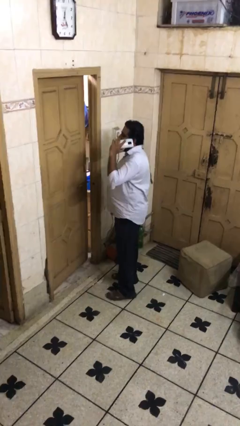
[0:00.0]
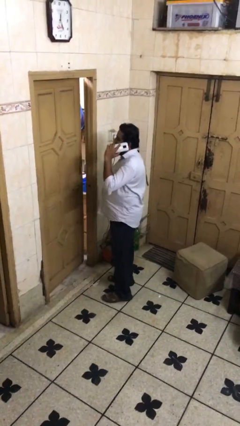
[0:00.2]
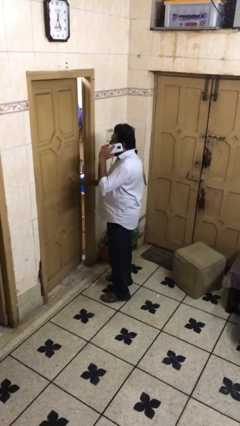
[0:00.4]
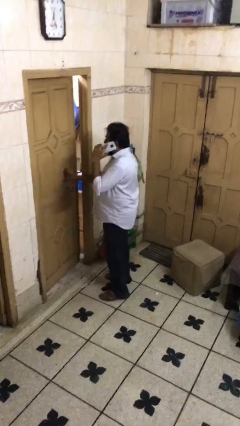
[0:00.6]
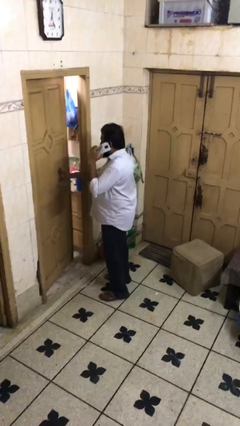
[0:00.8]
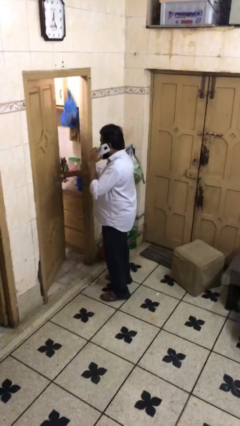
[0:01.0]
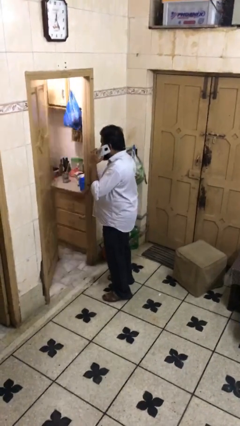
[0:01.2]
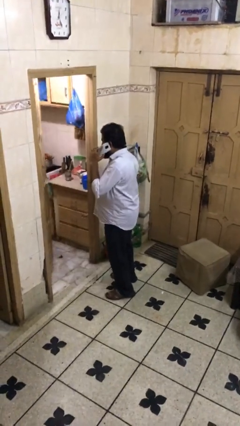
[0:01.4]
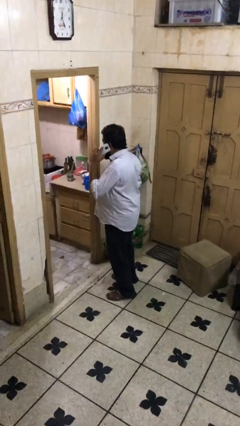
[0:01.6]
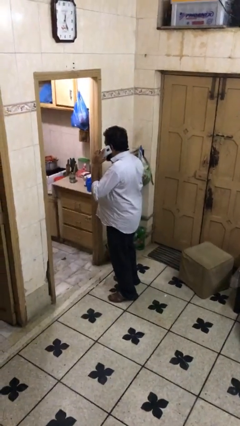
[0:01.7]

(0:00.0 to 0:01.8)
person opens facility door

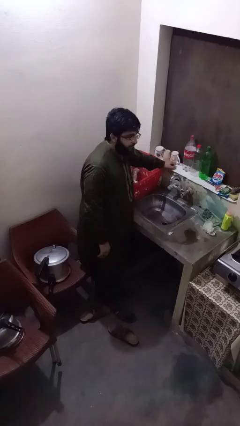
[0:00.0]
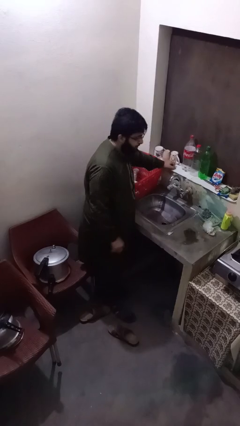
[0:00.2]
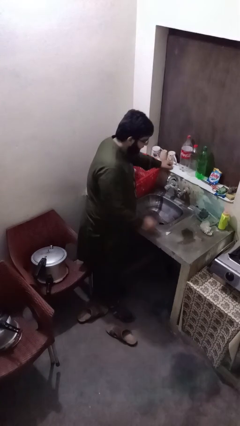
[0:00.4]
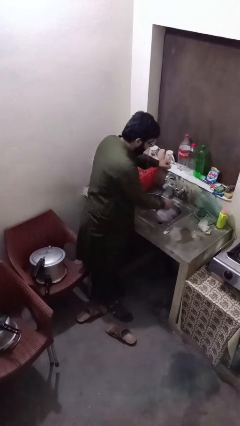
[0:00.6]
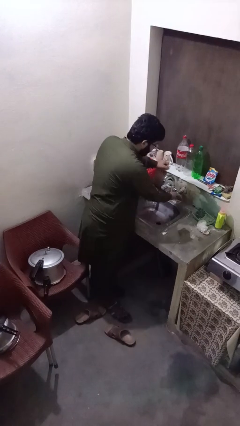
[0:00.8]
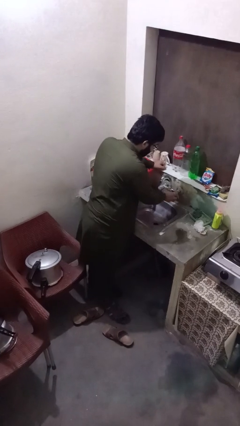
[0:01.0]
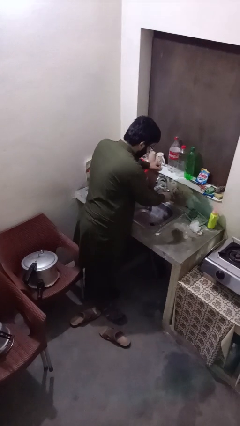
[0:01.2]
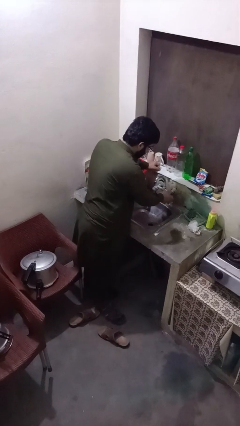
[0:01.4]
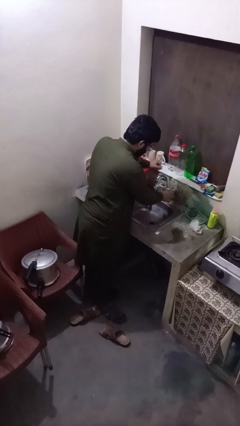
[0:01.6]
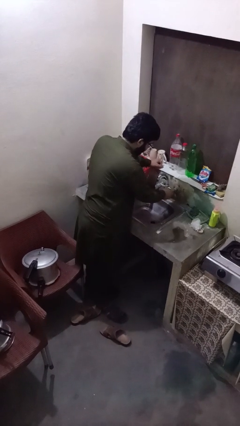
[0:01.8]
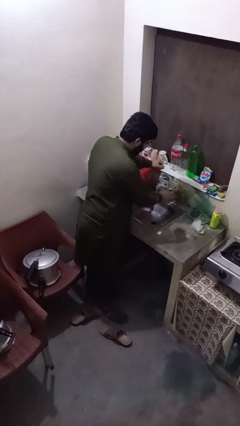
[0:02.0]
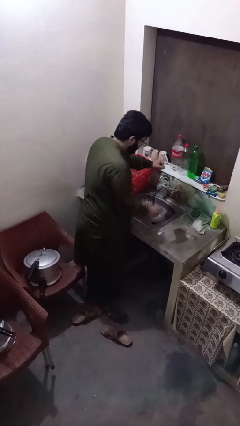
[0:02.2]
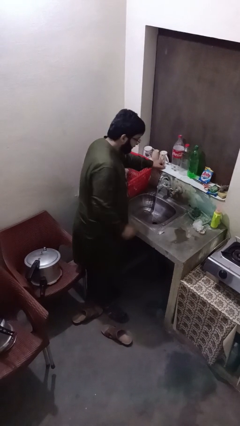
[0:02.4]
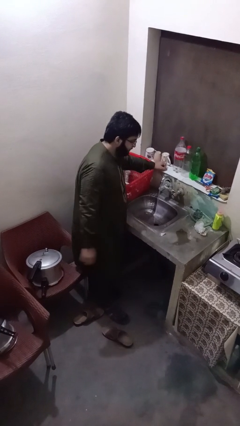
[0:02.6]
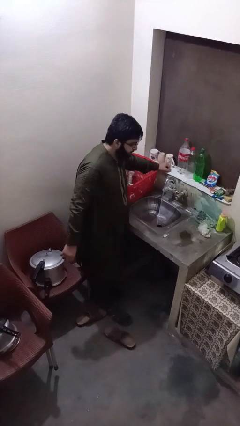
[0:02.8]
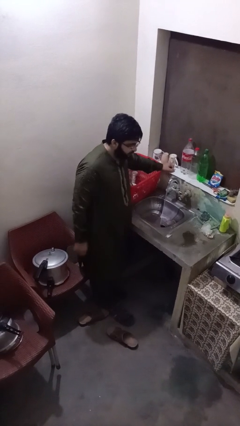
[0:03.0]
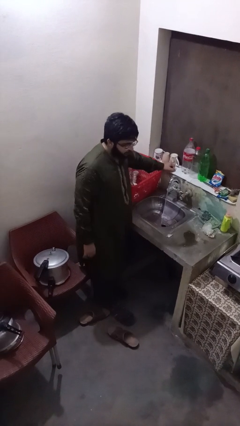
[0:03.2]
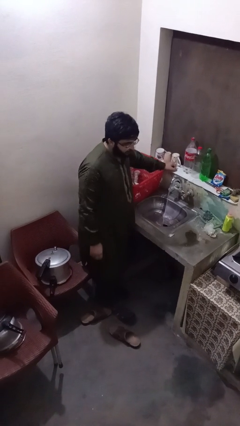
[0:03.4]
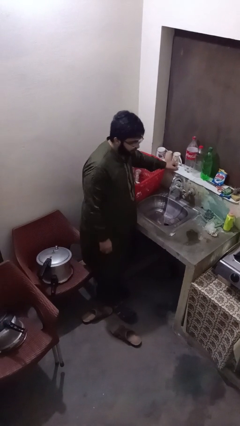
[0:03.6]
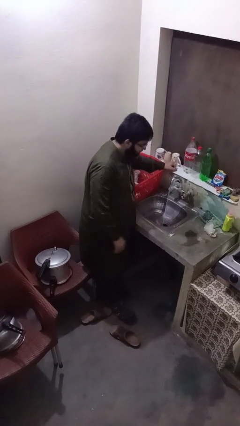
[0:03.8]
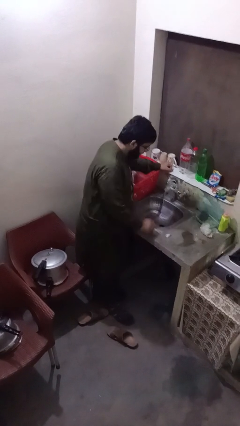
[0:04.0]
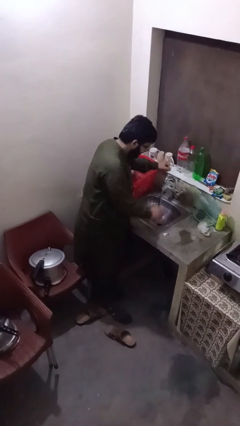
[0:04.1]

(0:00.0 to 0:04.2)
person turns on faucet

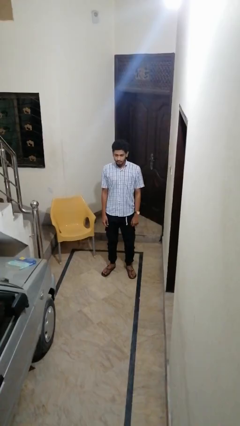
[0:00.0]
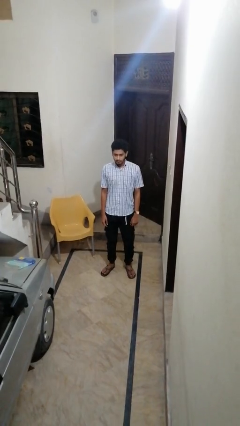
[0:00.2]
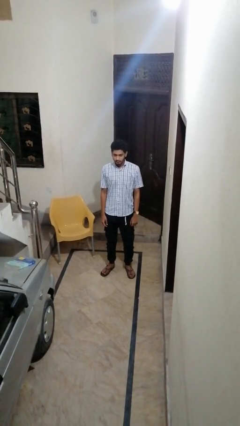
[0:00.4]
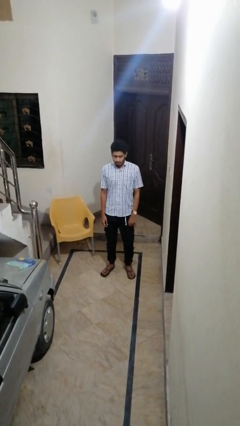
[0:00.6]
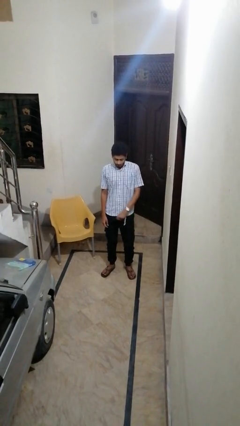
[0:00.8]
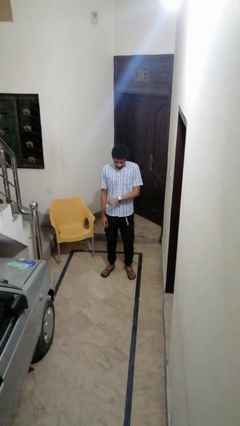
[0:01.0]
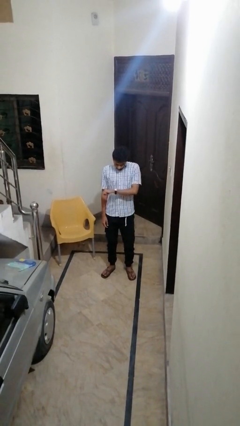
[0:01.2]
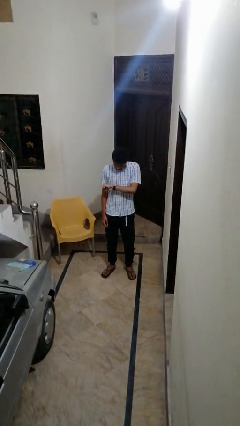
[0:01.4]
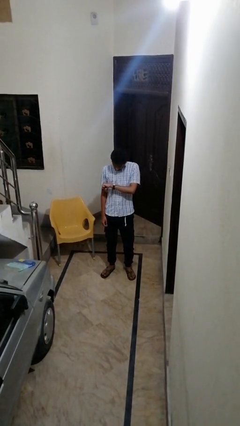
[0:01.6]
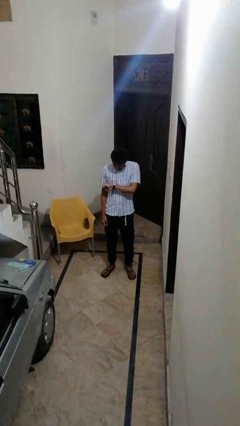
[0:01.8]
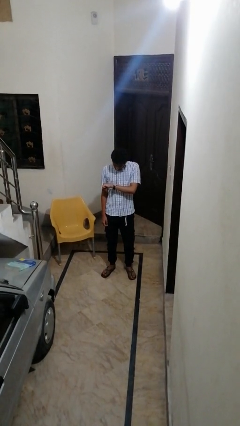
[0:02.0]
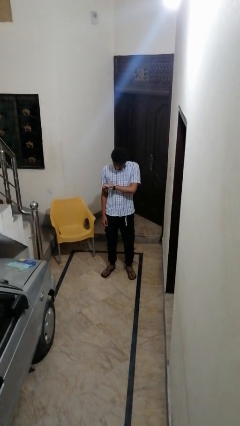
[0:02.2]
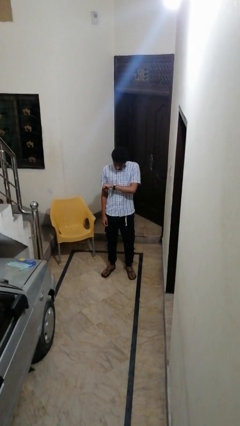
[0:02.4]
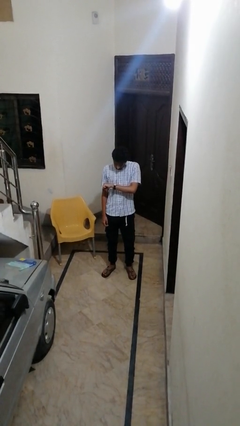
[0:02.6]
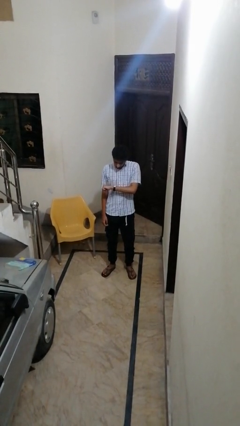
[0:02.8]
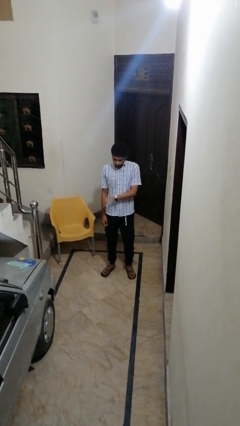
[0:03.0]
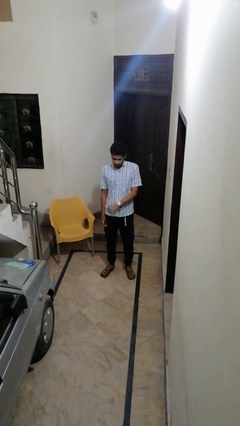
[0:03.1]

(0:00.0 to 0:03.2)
person looks at wristwatch

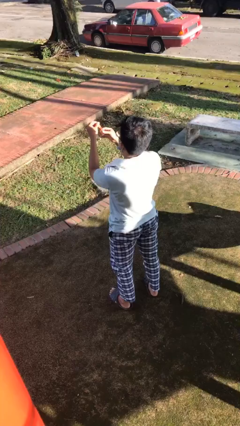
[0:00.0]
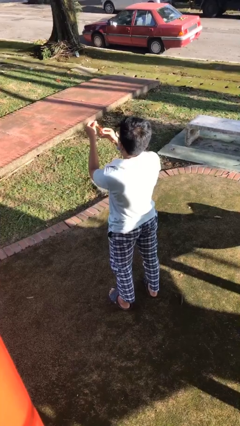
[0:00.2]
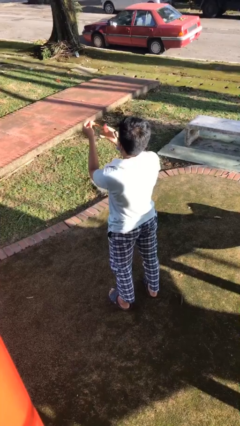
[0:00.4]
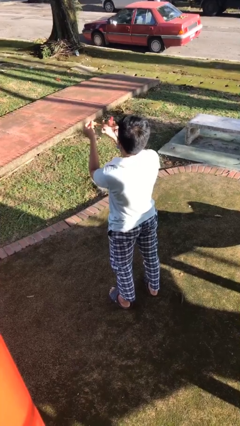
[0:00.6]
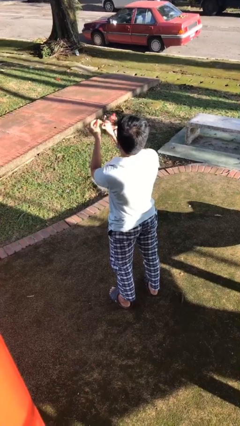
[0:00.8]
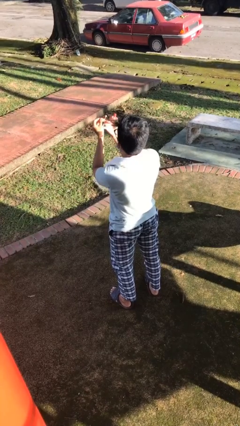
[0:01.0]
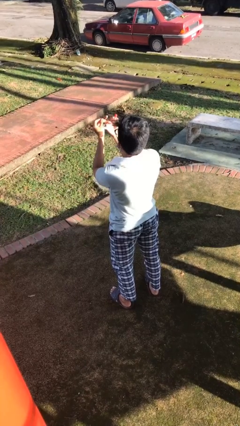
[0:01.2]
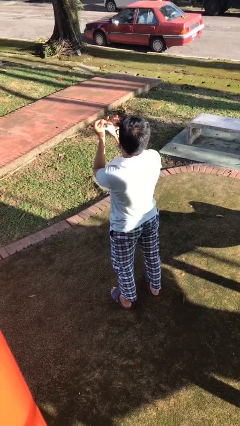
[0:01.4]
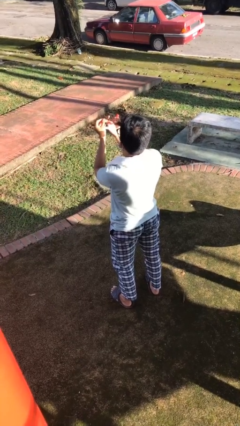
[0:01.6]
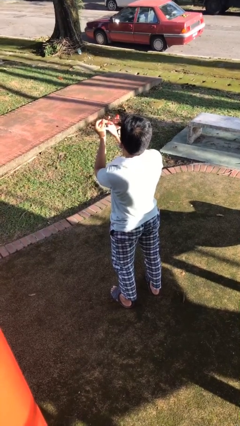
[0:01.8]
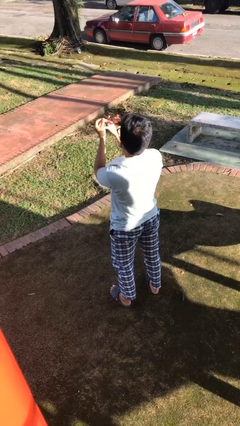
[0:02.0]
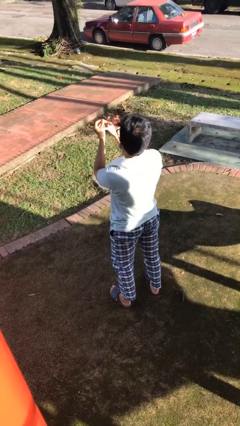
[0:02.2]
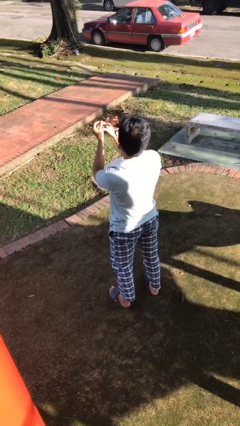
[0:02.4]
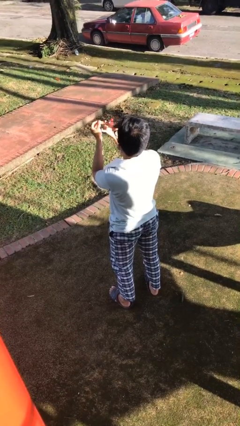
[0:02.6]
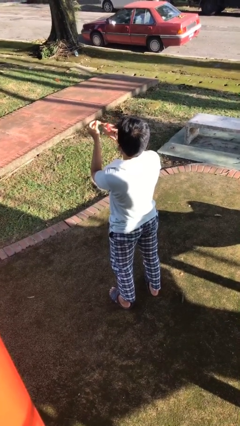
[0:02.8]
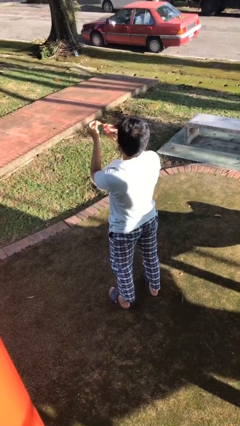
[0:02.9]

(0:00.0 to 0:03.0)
person paints fingernails

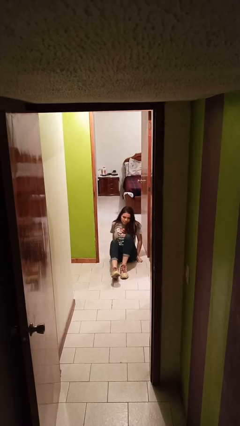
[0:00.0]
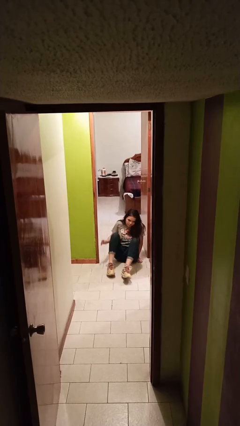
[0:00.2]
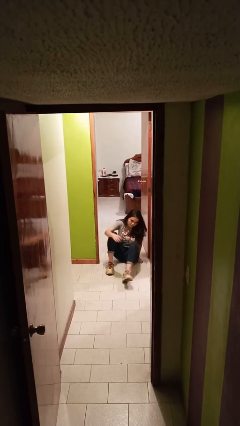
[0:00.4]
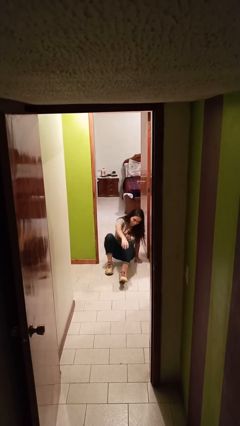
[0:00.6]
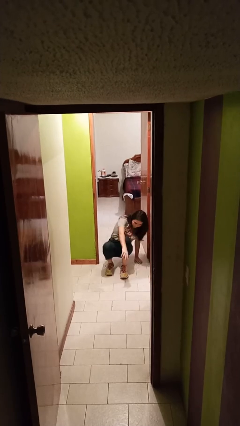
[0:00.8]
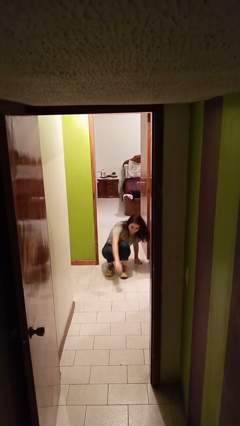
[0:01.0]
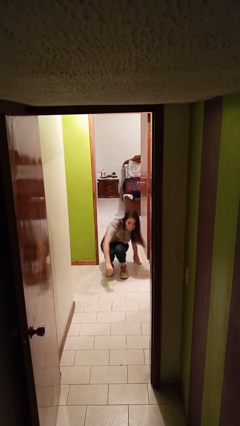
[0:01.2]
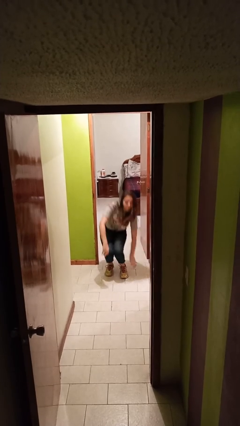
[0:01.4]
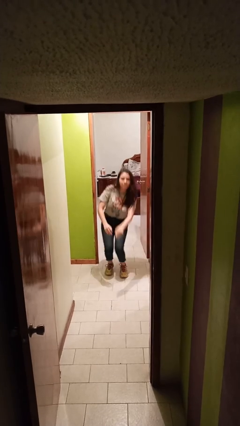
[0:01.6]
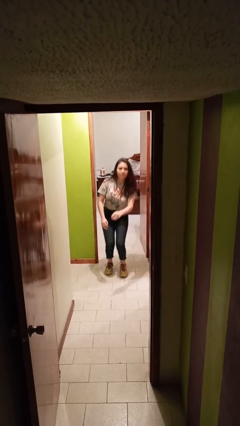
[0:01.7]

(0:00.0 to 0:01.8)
person stands up

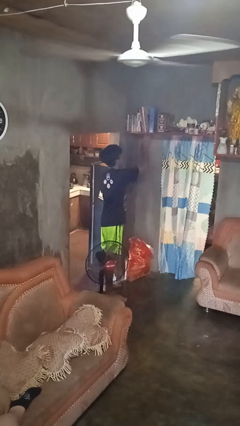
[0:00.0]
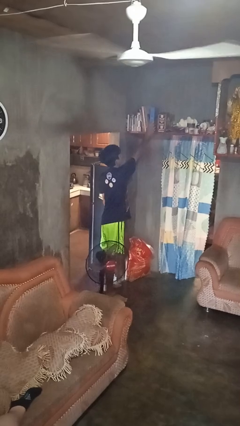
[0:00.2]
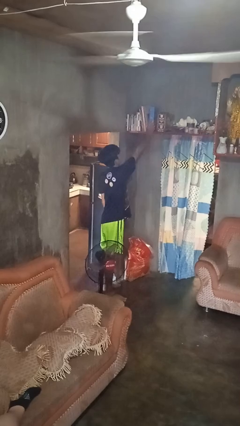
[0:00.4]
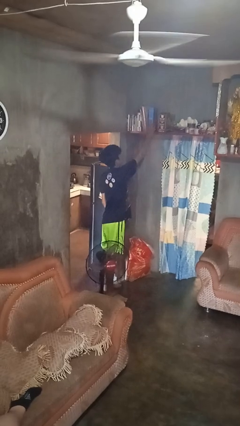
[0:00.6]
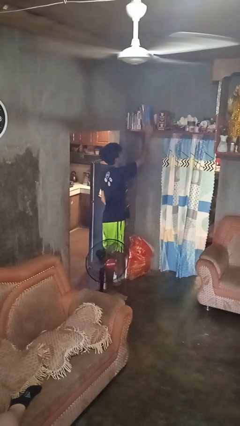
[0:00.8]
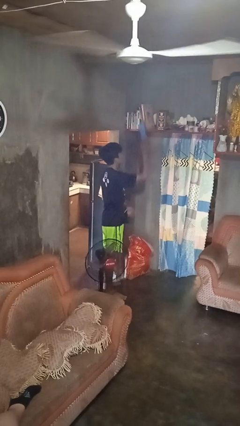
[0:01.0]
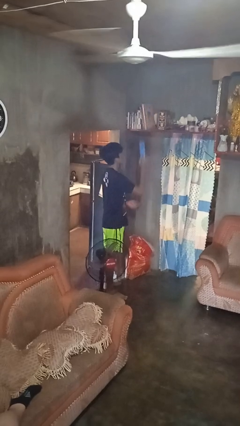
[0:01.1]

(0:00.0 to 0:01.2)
person picks up object from shelf

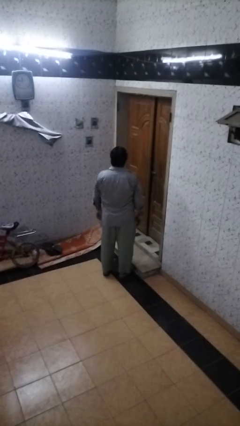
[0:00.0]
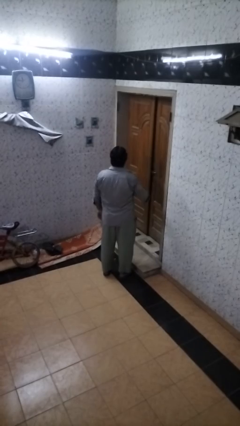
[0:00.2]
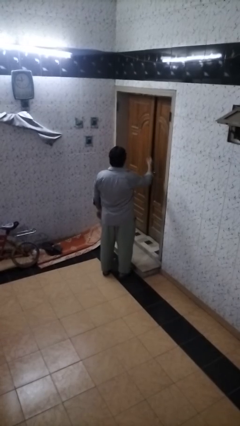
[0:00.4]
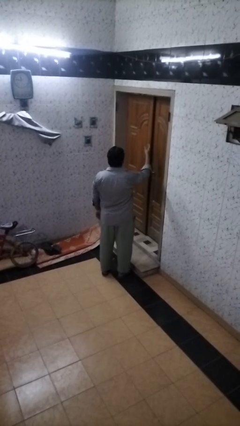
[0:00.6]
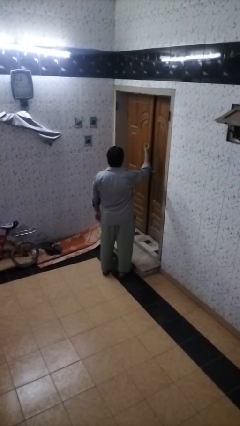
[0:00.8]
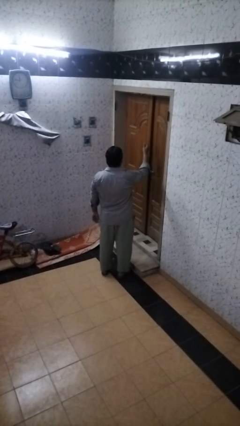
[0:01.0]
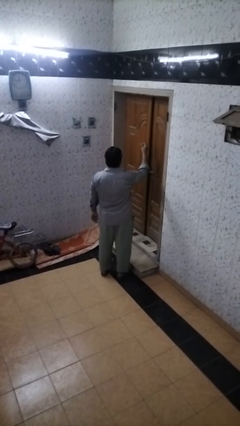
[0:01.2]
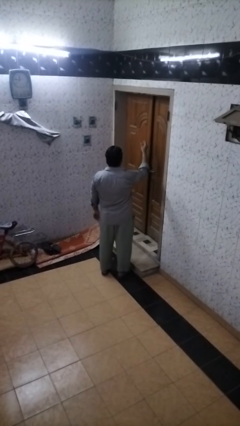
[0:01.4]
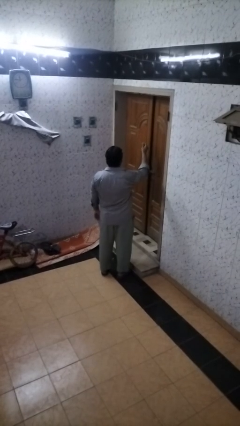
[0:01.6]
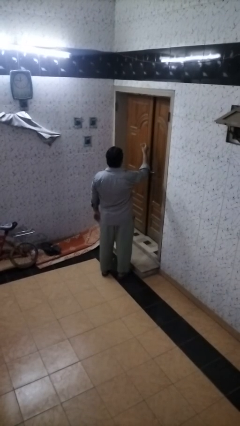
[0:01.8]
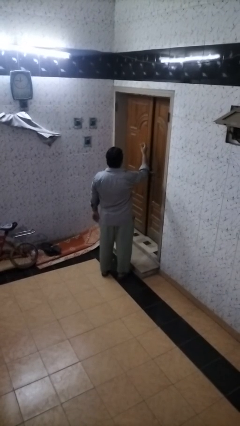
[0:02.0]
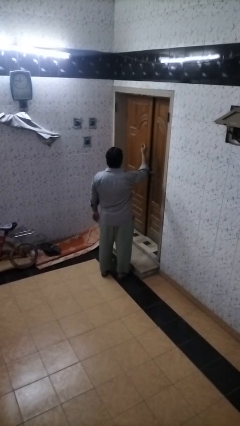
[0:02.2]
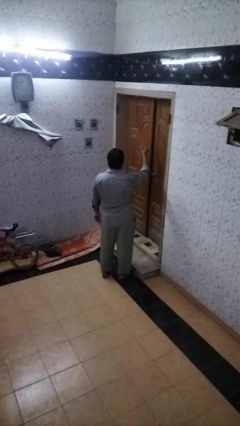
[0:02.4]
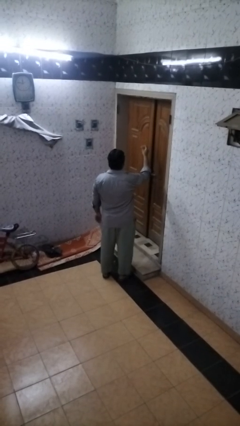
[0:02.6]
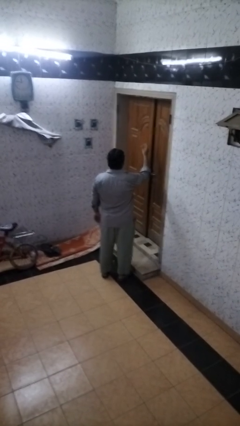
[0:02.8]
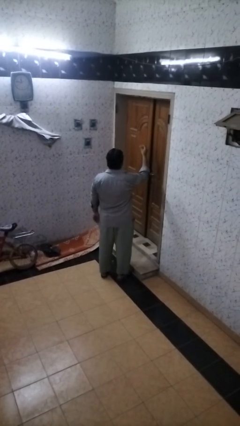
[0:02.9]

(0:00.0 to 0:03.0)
person snaps fingers
